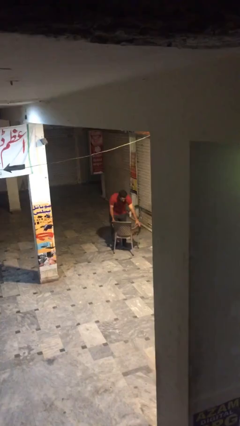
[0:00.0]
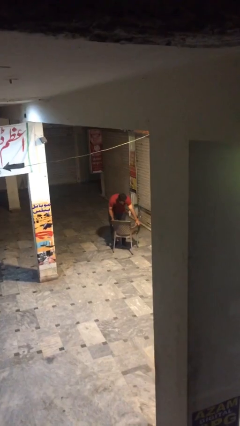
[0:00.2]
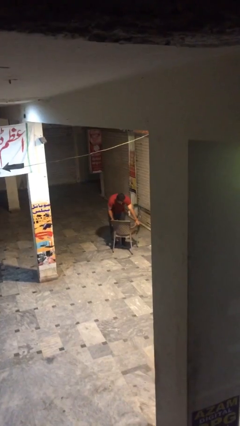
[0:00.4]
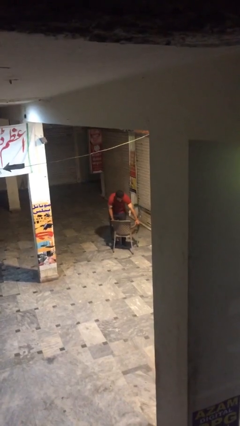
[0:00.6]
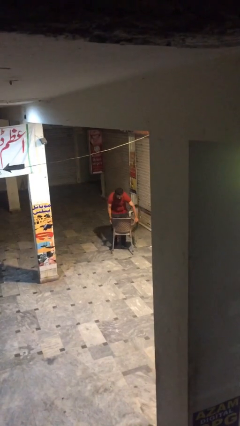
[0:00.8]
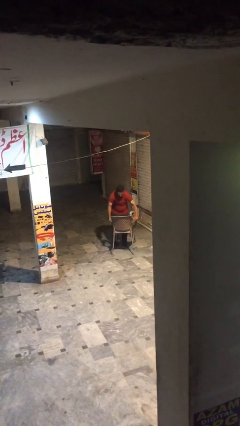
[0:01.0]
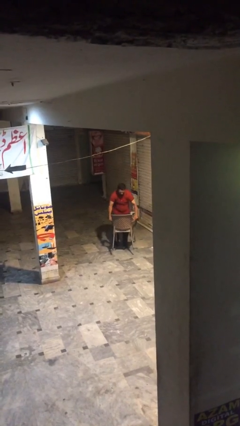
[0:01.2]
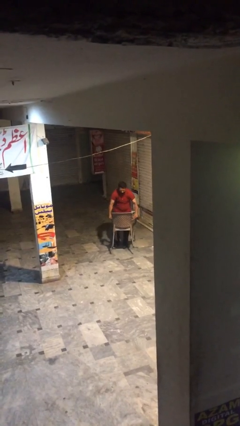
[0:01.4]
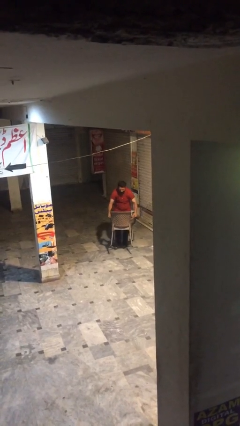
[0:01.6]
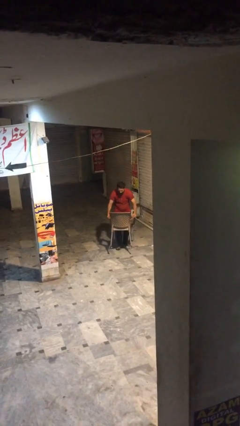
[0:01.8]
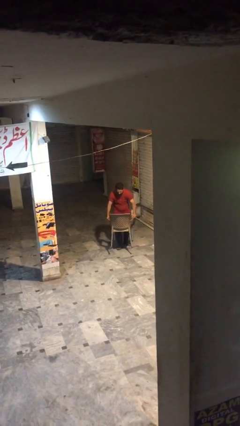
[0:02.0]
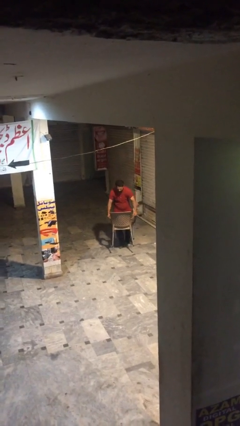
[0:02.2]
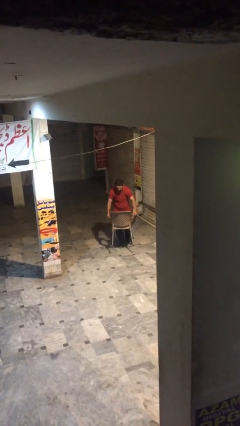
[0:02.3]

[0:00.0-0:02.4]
person picks up object from floor

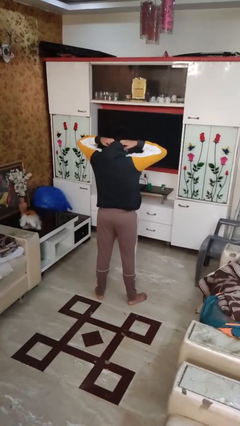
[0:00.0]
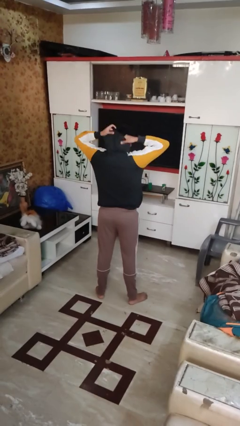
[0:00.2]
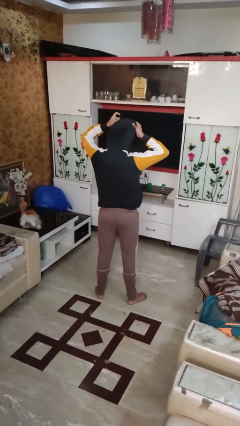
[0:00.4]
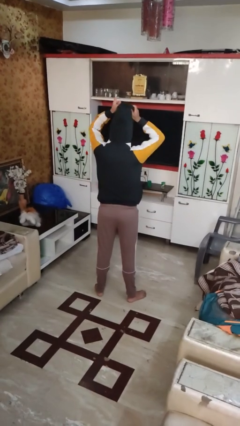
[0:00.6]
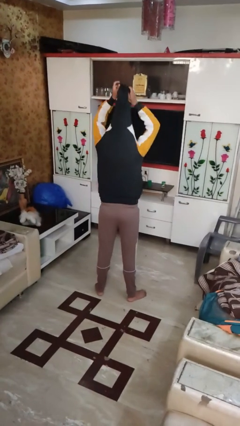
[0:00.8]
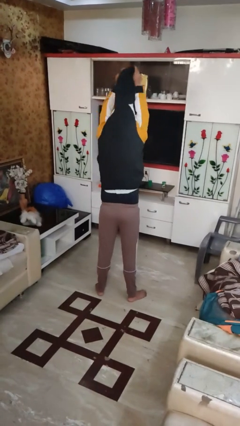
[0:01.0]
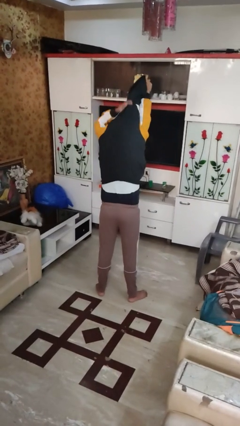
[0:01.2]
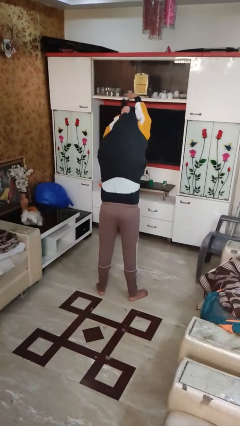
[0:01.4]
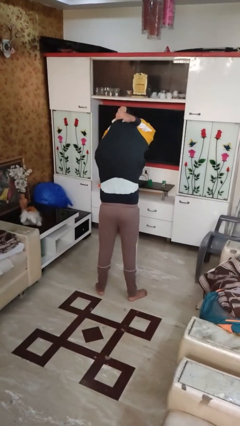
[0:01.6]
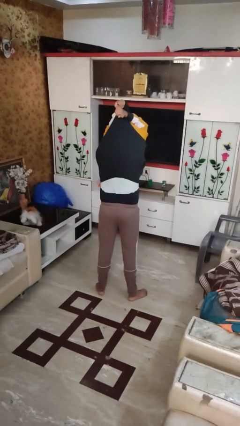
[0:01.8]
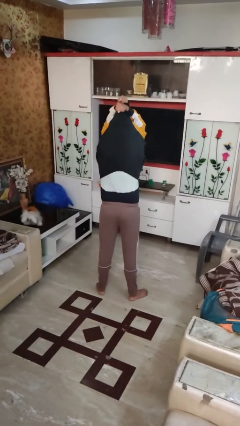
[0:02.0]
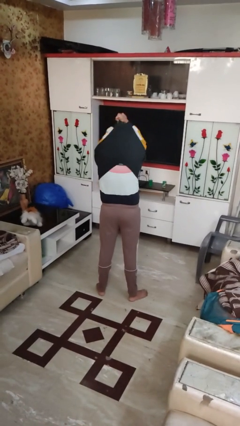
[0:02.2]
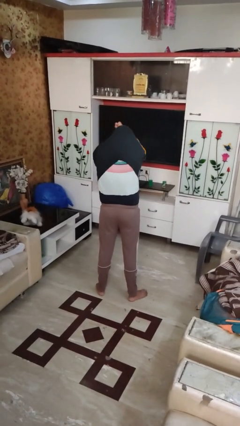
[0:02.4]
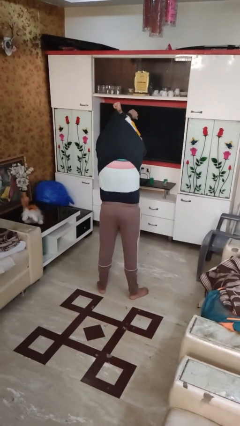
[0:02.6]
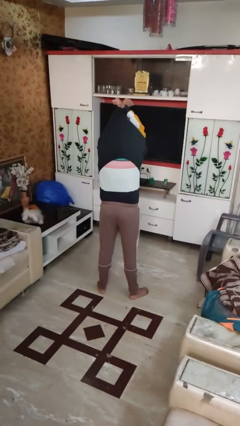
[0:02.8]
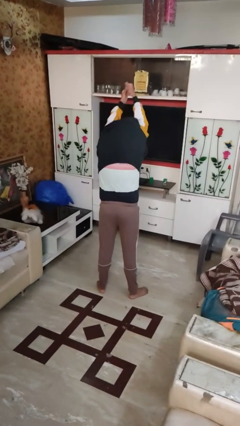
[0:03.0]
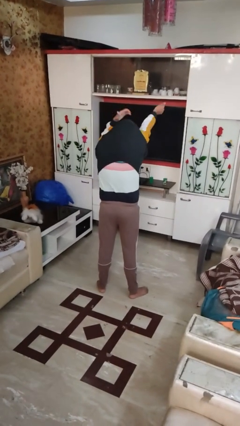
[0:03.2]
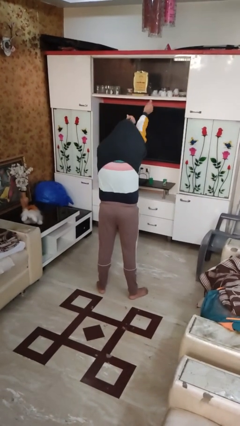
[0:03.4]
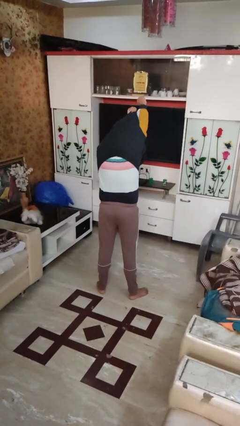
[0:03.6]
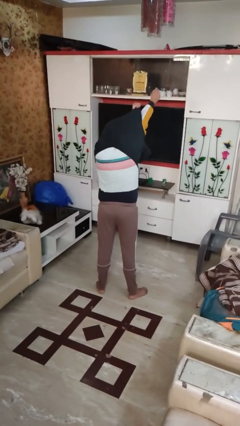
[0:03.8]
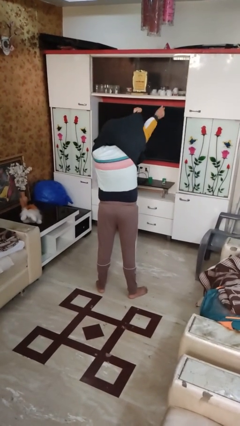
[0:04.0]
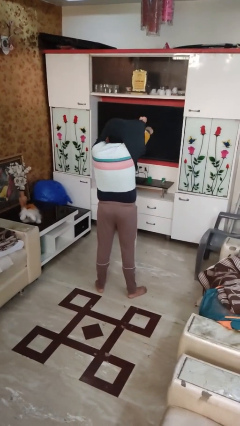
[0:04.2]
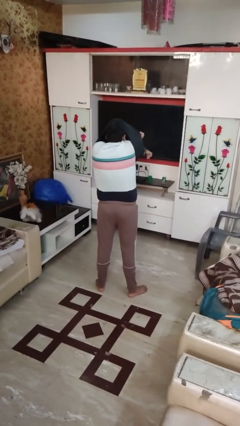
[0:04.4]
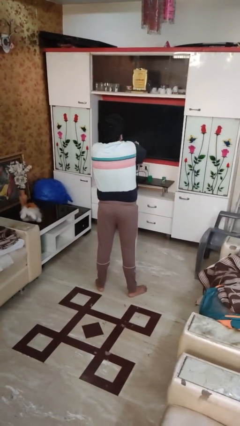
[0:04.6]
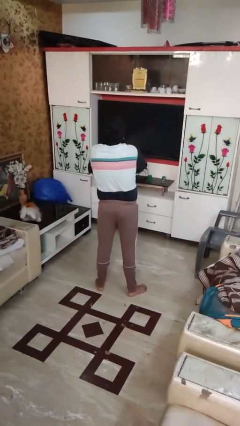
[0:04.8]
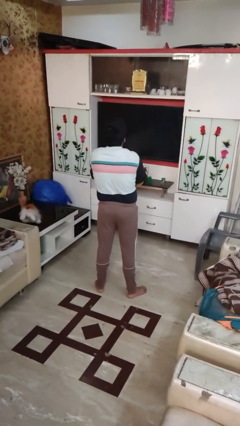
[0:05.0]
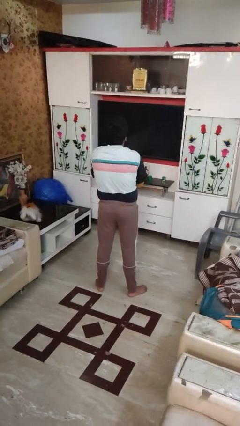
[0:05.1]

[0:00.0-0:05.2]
person takes off hoodie

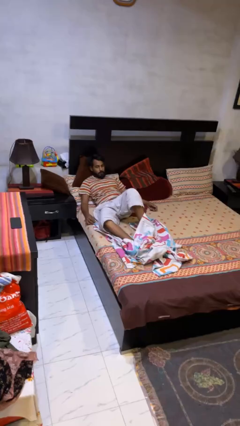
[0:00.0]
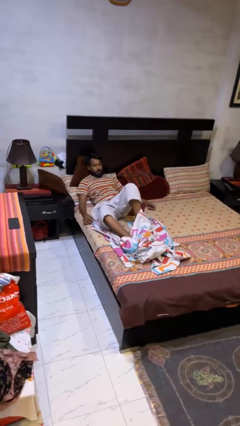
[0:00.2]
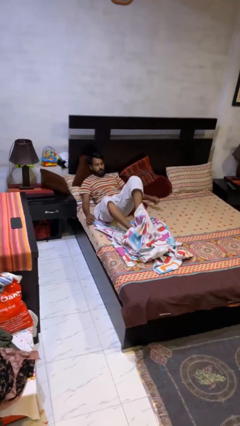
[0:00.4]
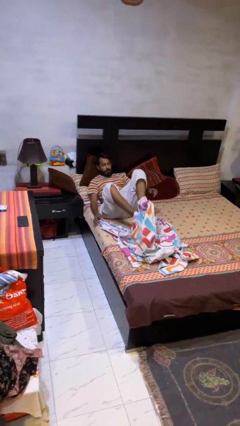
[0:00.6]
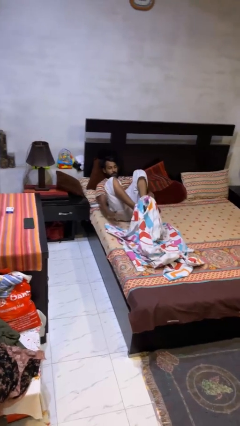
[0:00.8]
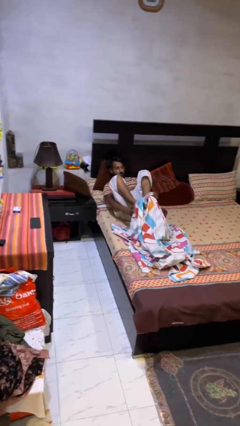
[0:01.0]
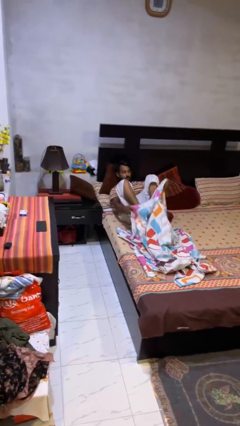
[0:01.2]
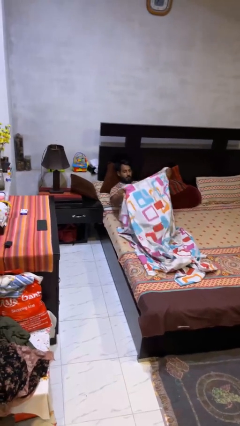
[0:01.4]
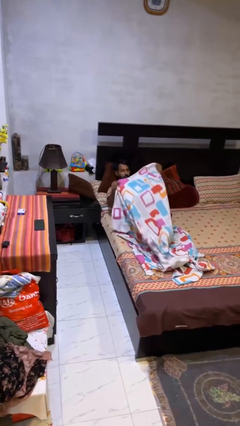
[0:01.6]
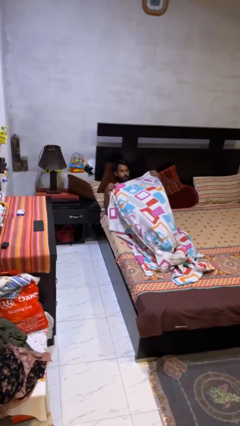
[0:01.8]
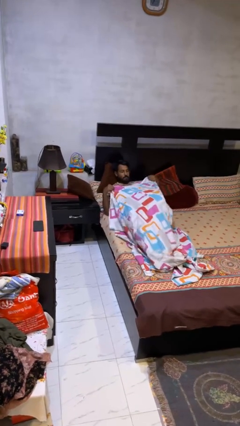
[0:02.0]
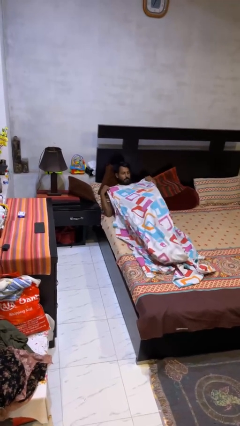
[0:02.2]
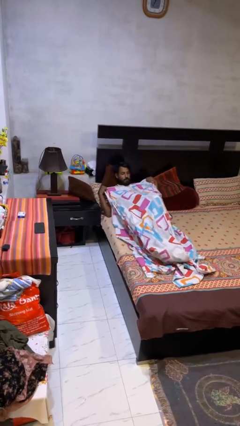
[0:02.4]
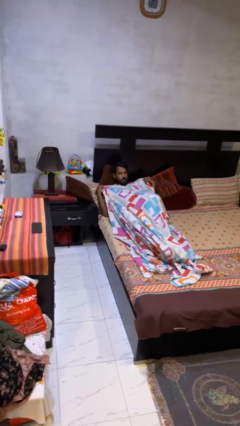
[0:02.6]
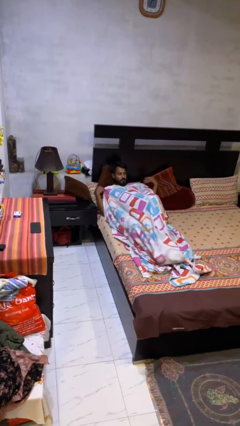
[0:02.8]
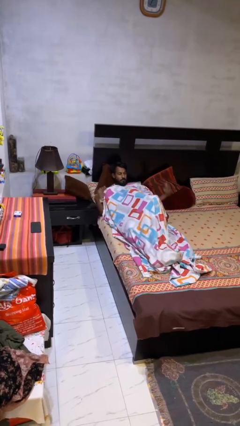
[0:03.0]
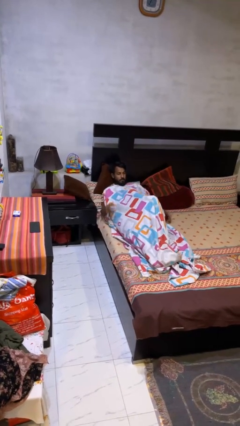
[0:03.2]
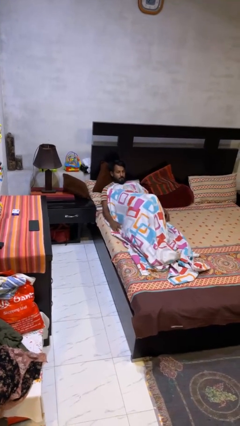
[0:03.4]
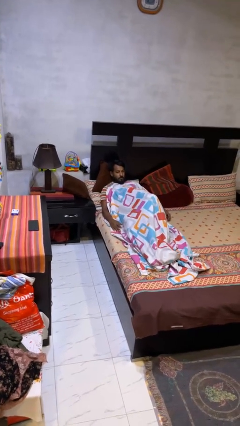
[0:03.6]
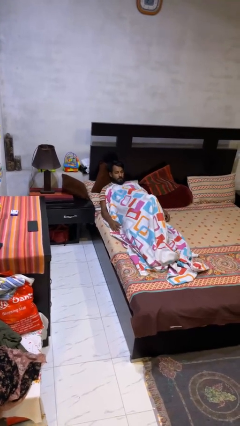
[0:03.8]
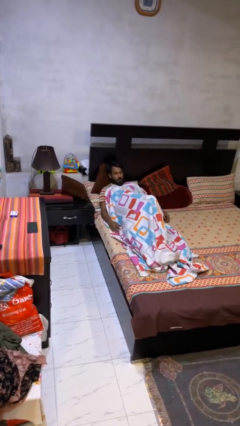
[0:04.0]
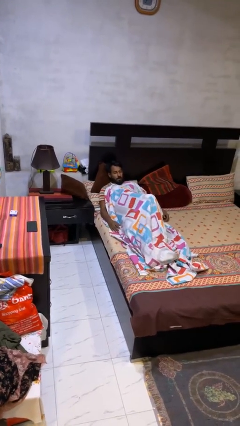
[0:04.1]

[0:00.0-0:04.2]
person covers with bedsheets

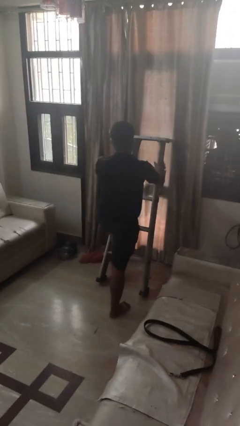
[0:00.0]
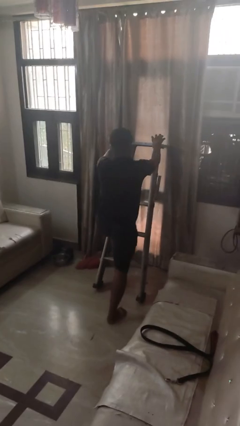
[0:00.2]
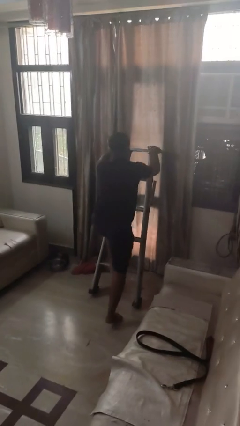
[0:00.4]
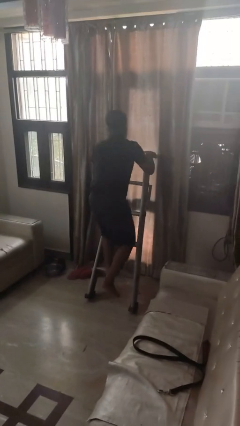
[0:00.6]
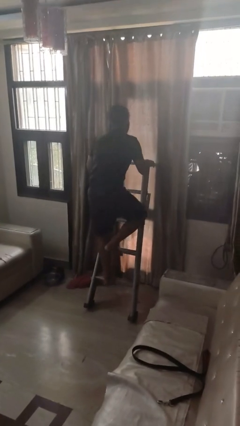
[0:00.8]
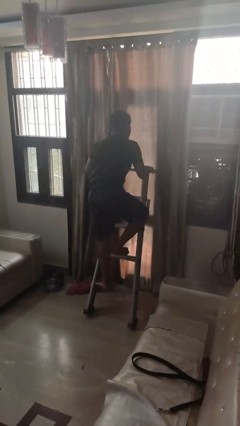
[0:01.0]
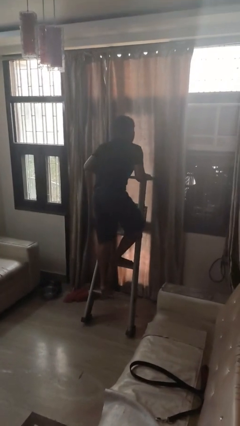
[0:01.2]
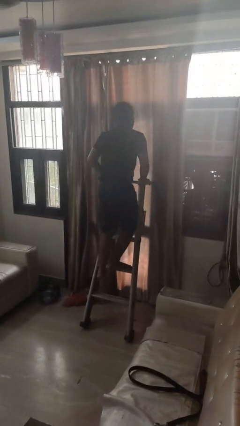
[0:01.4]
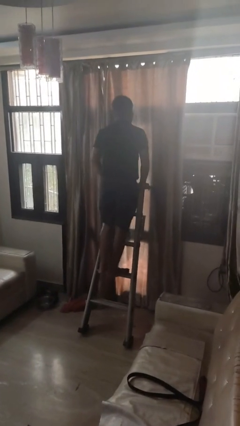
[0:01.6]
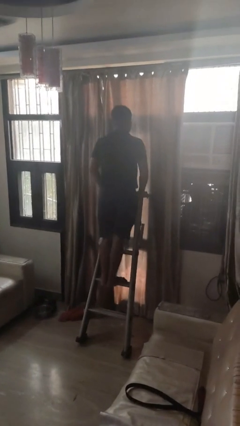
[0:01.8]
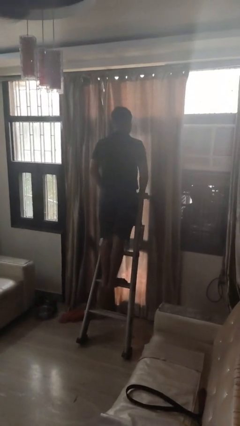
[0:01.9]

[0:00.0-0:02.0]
person climbs up ladder

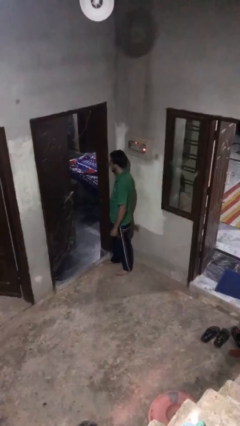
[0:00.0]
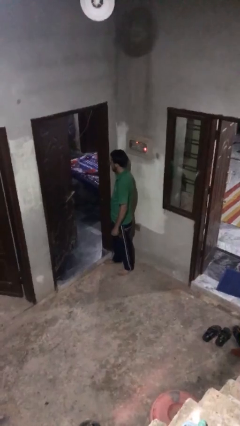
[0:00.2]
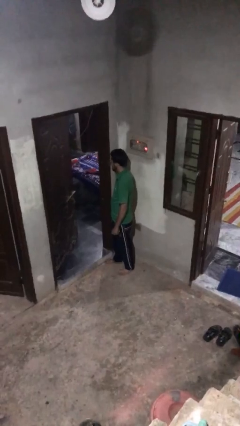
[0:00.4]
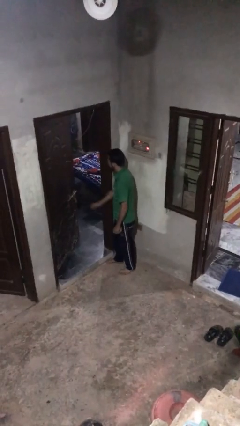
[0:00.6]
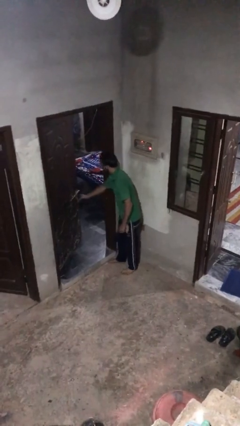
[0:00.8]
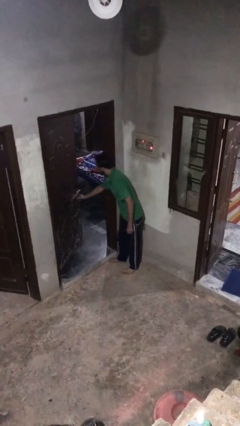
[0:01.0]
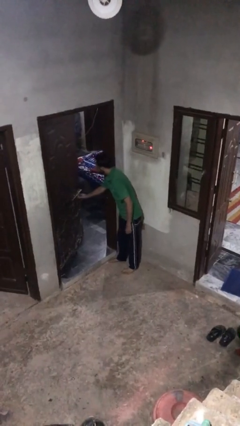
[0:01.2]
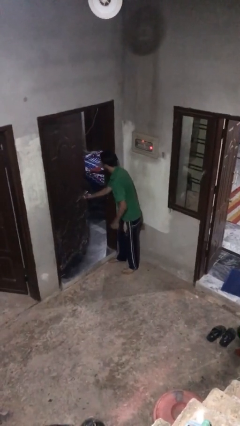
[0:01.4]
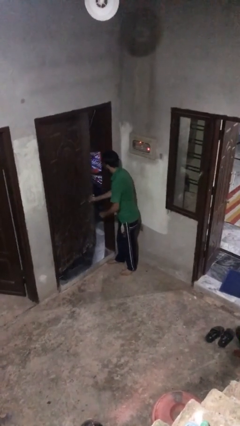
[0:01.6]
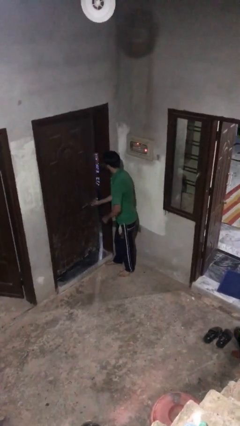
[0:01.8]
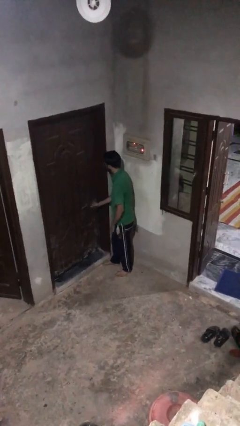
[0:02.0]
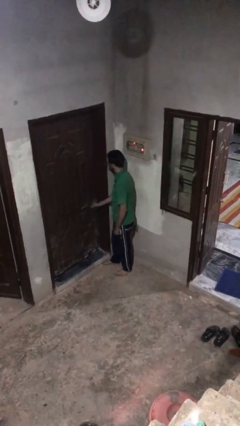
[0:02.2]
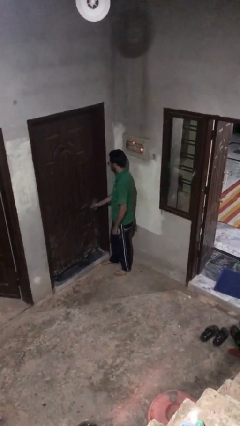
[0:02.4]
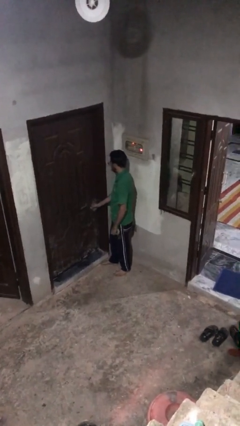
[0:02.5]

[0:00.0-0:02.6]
person closes facility door

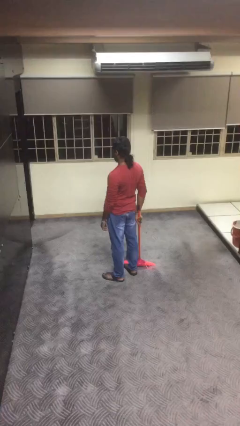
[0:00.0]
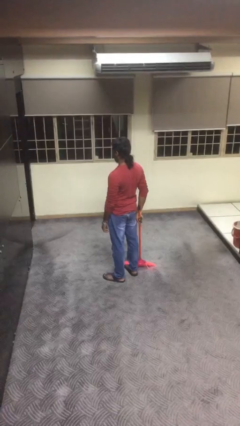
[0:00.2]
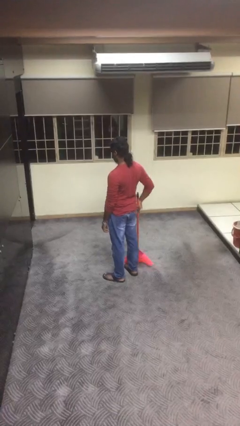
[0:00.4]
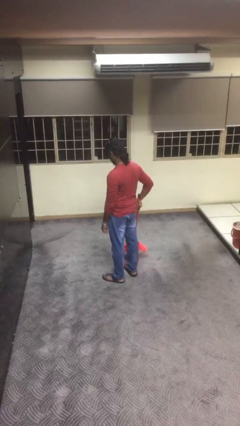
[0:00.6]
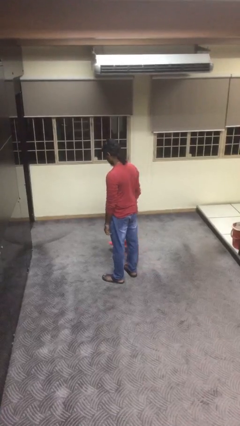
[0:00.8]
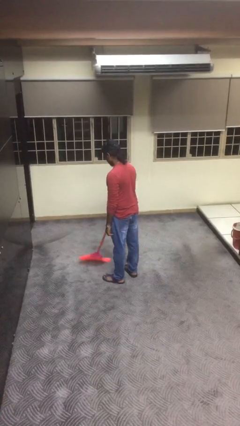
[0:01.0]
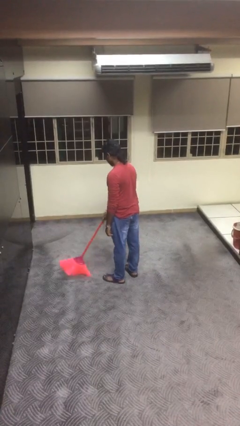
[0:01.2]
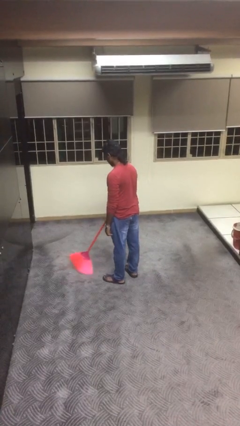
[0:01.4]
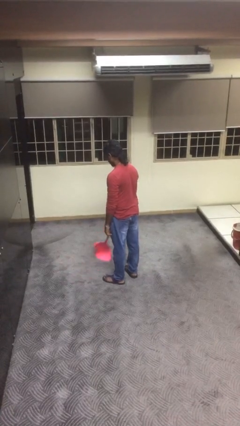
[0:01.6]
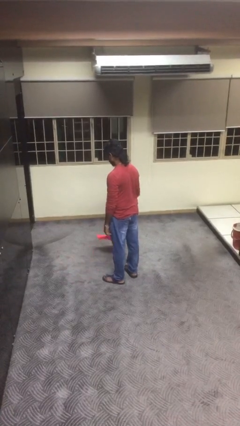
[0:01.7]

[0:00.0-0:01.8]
person sweeps floor
